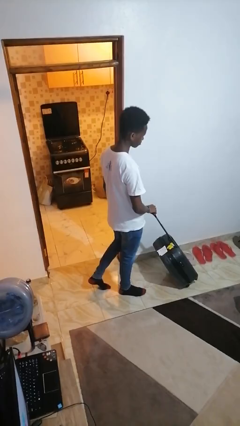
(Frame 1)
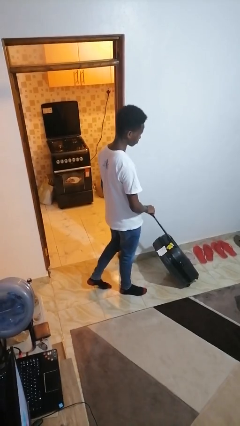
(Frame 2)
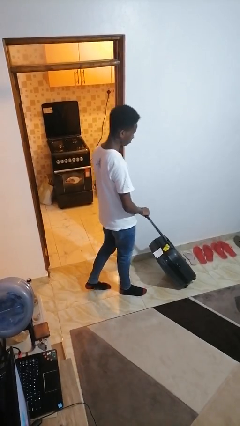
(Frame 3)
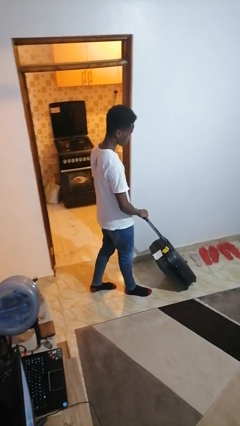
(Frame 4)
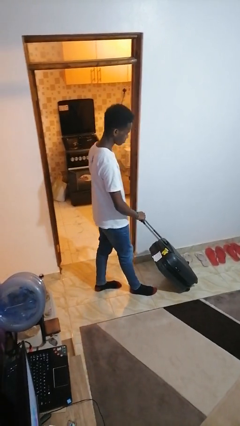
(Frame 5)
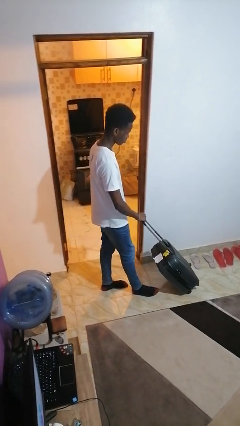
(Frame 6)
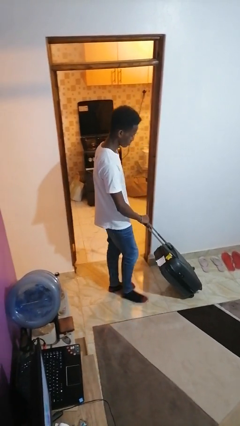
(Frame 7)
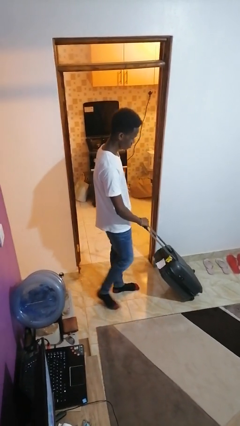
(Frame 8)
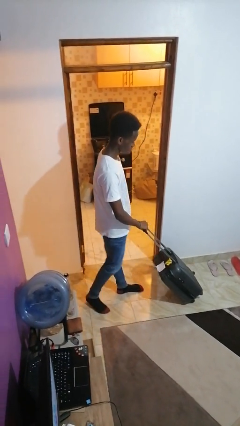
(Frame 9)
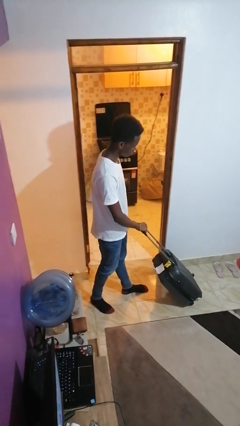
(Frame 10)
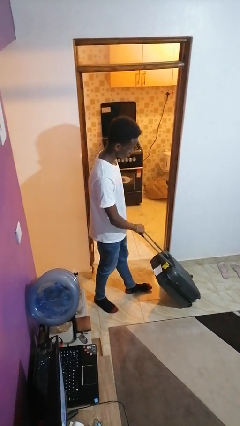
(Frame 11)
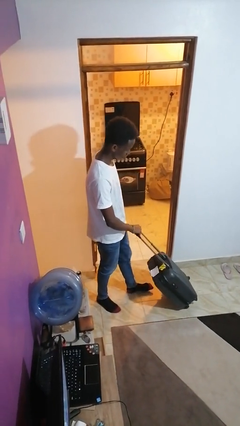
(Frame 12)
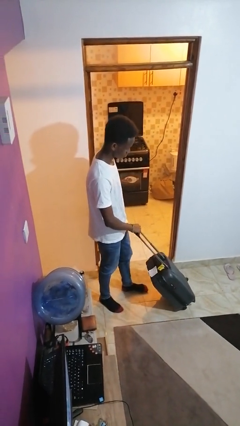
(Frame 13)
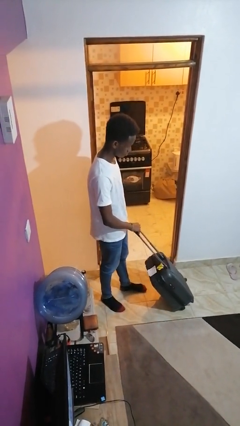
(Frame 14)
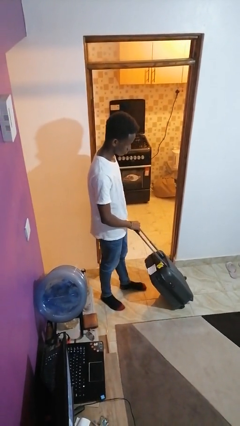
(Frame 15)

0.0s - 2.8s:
person pulls wheeled cart

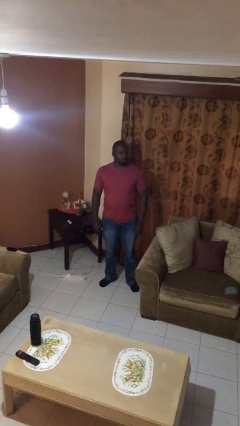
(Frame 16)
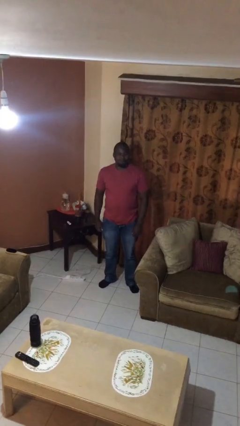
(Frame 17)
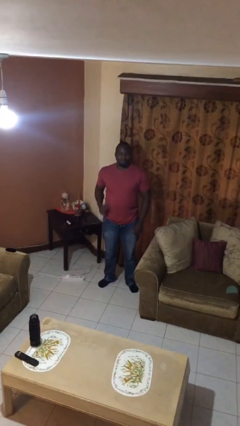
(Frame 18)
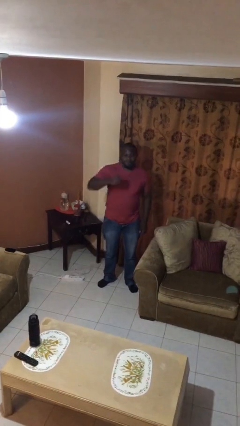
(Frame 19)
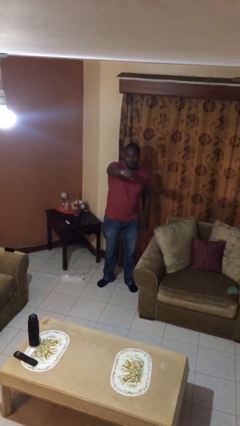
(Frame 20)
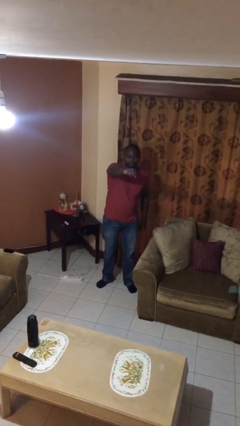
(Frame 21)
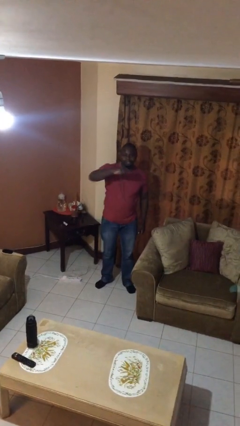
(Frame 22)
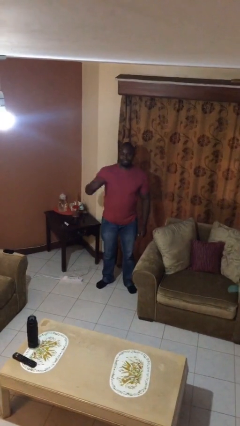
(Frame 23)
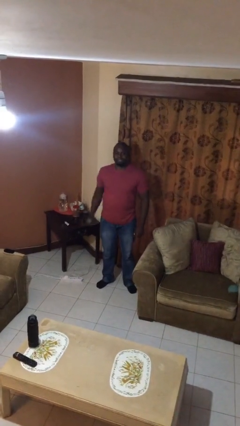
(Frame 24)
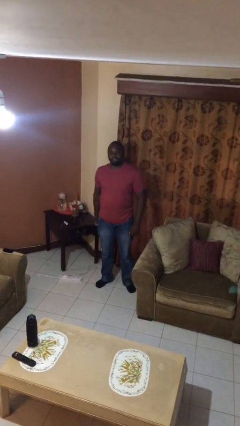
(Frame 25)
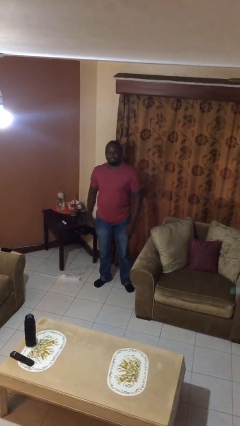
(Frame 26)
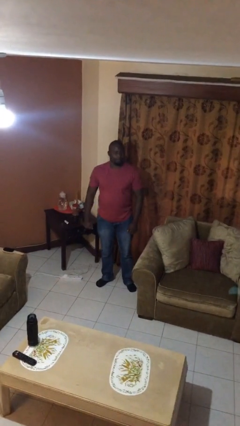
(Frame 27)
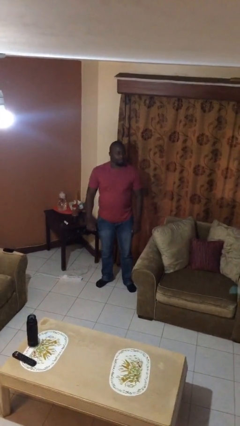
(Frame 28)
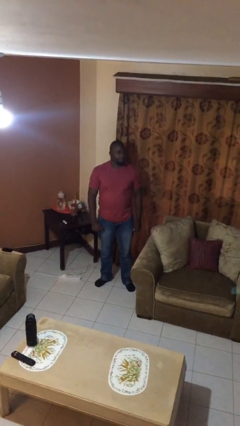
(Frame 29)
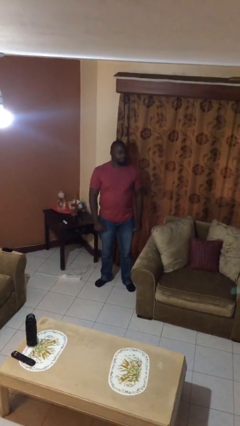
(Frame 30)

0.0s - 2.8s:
person punches

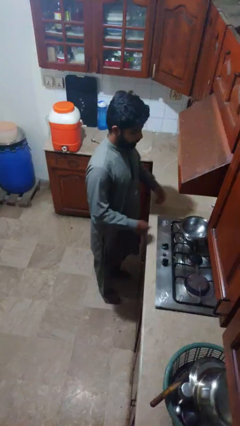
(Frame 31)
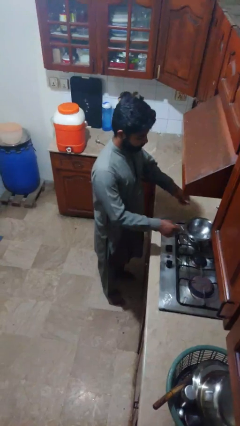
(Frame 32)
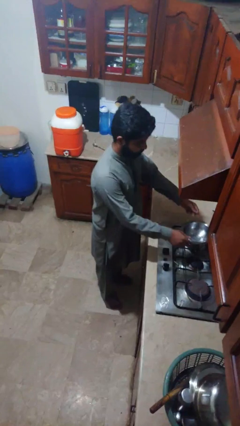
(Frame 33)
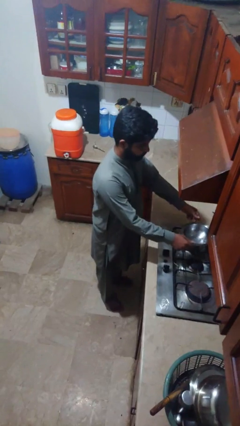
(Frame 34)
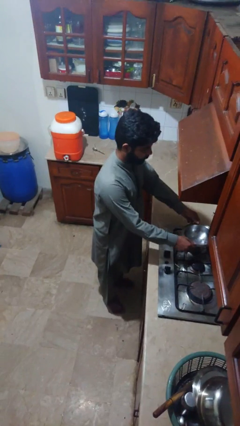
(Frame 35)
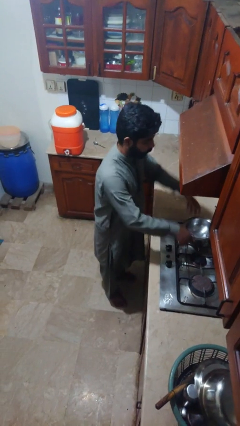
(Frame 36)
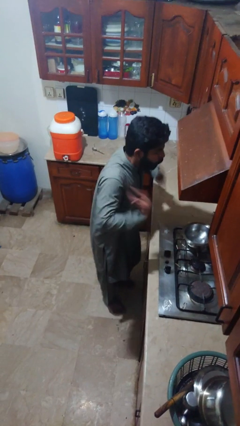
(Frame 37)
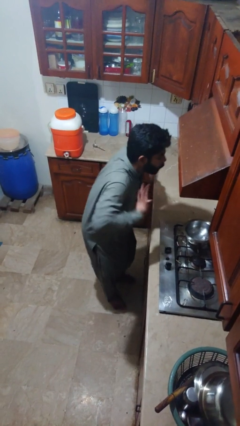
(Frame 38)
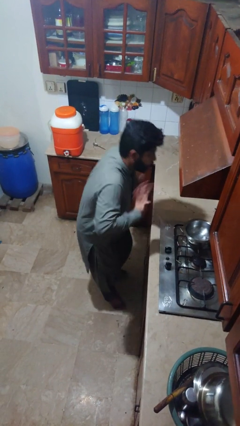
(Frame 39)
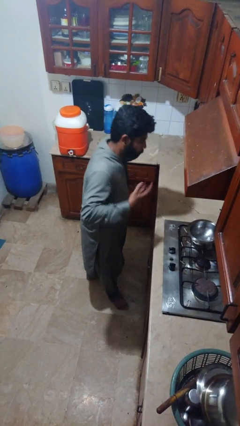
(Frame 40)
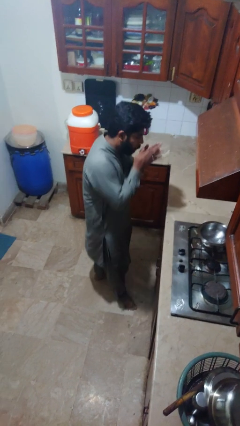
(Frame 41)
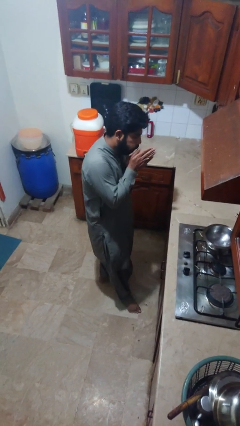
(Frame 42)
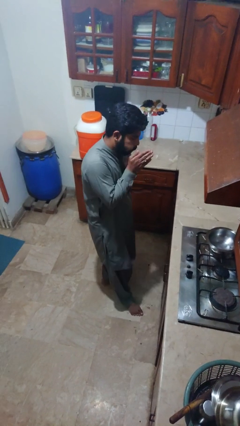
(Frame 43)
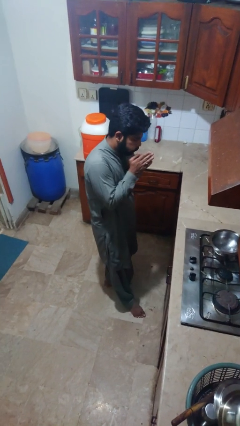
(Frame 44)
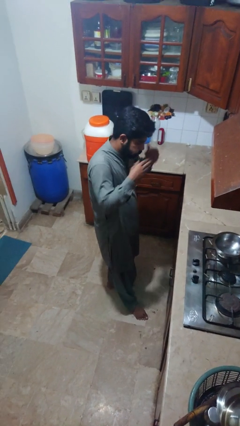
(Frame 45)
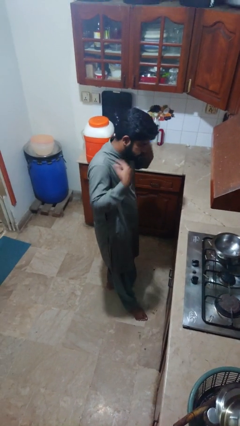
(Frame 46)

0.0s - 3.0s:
person burns hand

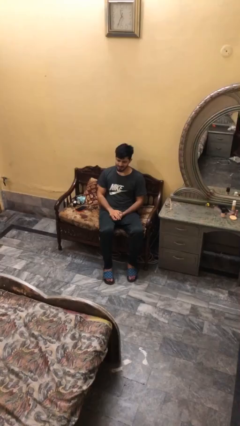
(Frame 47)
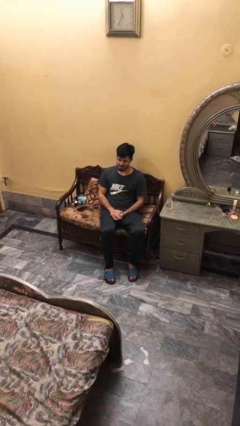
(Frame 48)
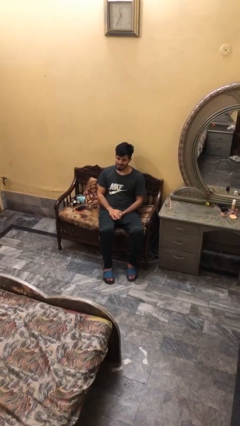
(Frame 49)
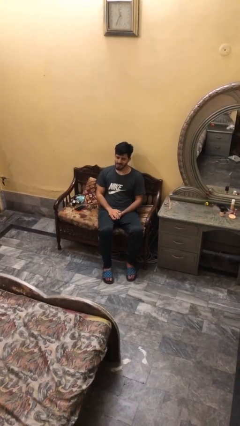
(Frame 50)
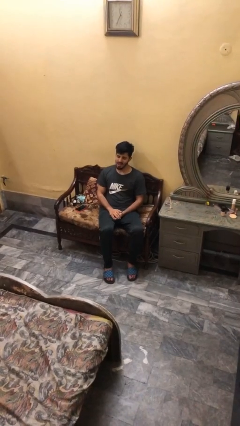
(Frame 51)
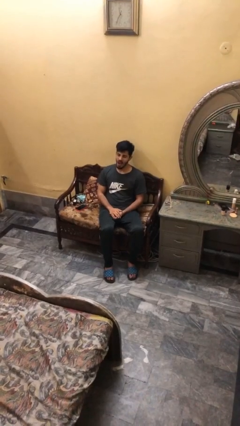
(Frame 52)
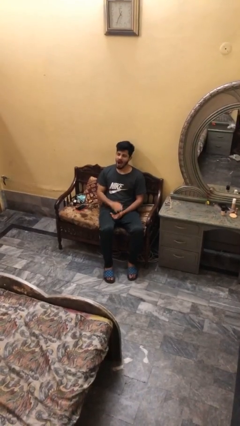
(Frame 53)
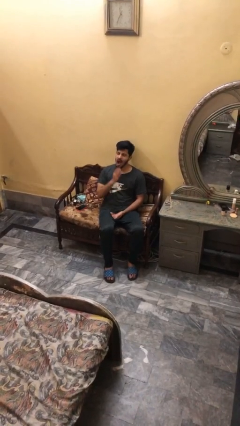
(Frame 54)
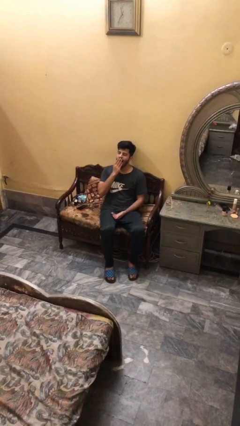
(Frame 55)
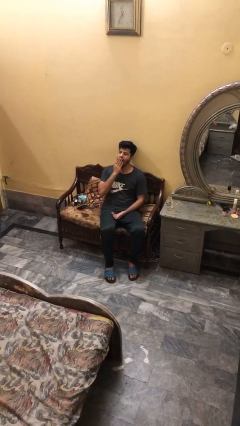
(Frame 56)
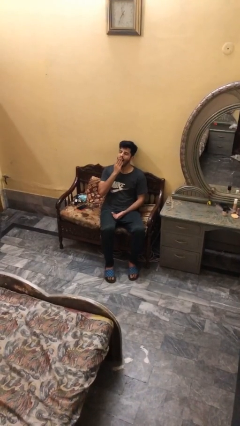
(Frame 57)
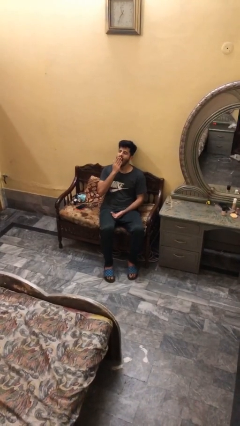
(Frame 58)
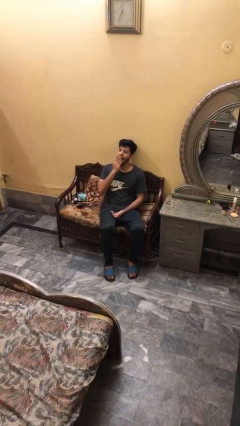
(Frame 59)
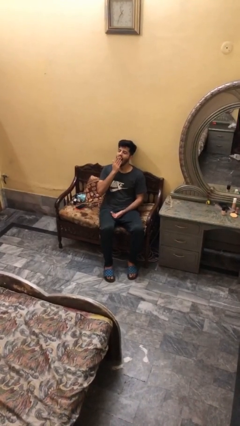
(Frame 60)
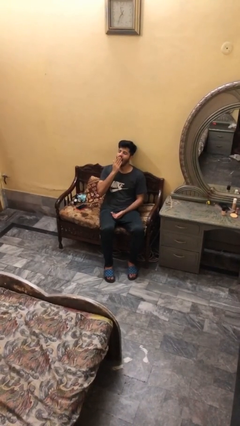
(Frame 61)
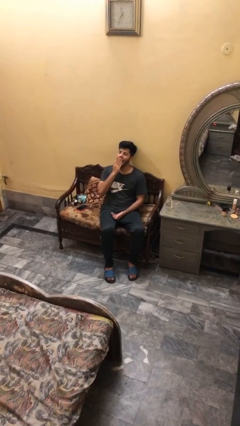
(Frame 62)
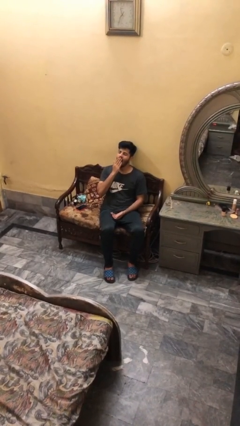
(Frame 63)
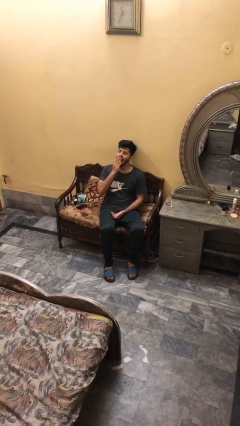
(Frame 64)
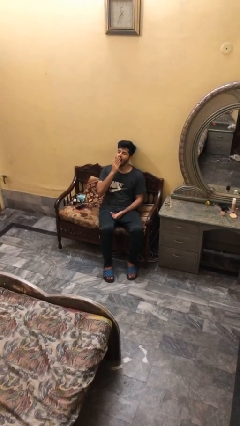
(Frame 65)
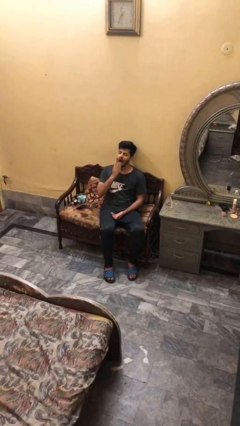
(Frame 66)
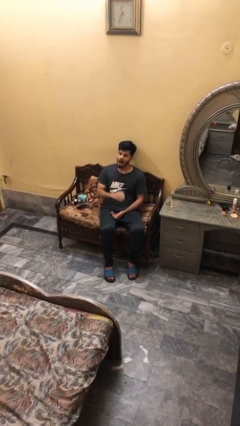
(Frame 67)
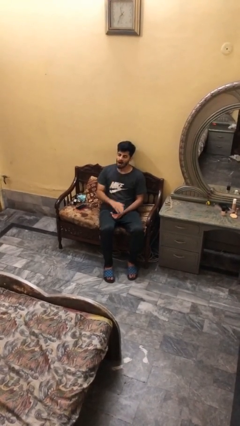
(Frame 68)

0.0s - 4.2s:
person yawns

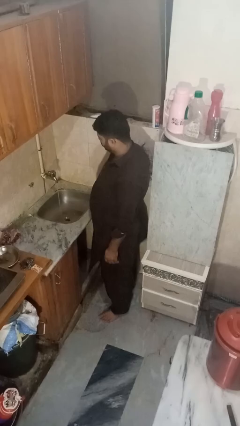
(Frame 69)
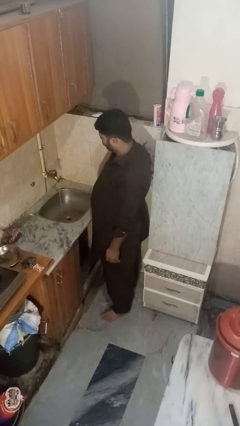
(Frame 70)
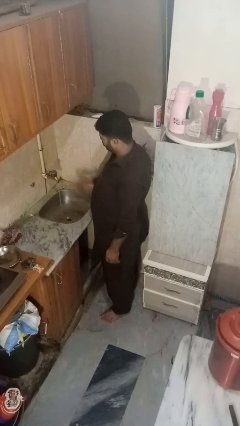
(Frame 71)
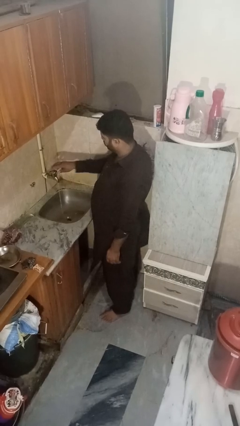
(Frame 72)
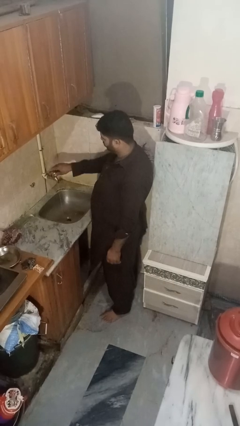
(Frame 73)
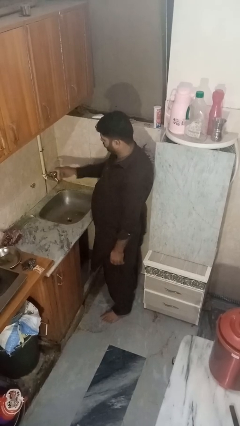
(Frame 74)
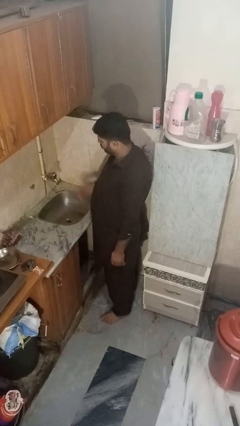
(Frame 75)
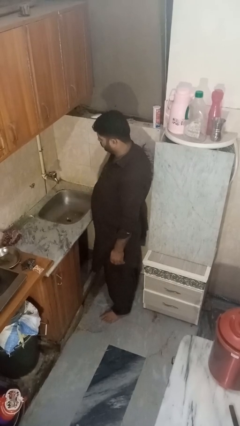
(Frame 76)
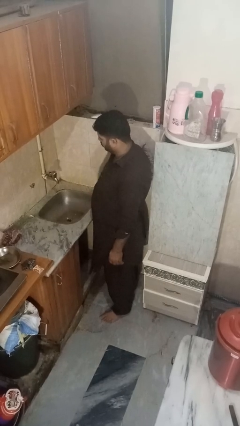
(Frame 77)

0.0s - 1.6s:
person turns off faucet

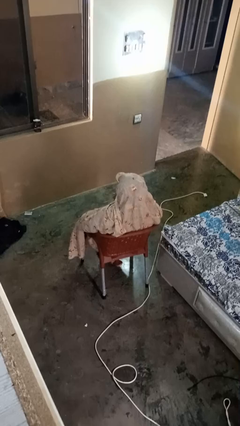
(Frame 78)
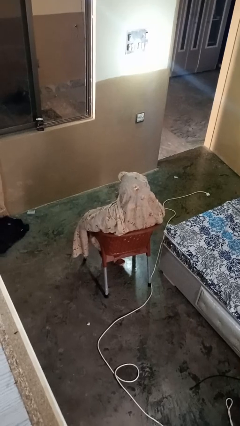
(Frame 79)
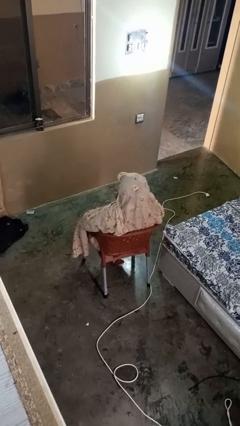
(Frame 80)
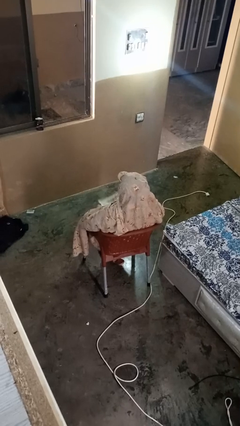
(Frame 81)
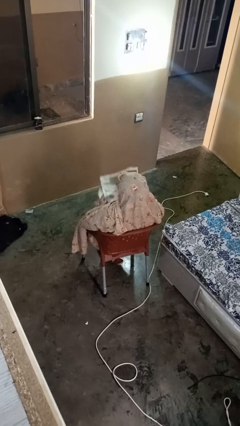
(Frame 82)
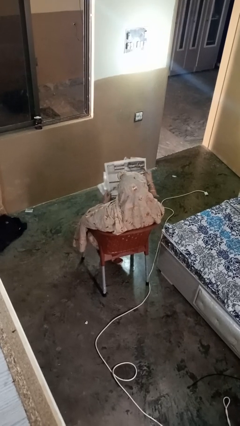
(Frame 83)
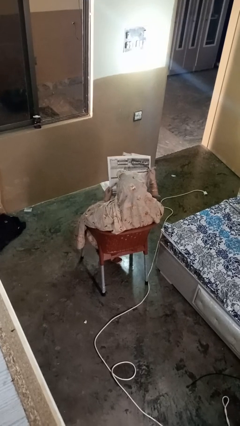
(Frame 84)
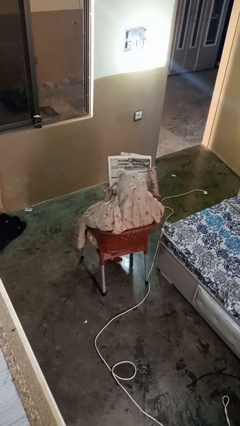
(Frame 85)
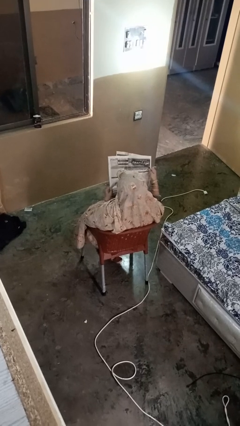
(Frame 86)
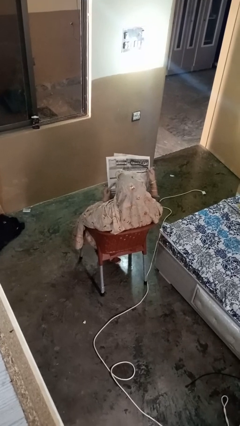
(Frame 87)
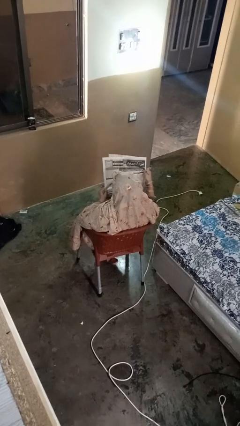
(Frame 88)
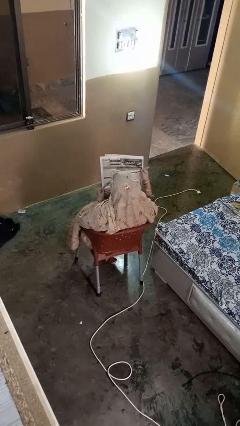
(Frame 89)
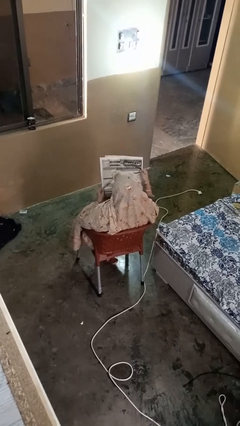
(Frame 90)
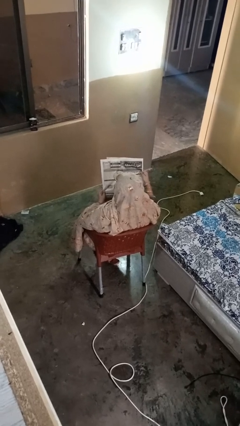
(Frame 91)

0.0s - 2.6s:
person reads newspaper

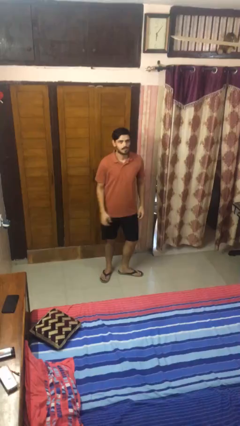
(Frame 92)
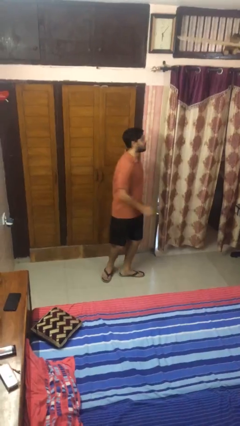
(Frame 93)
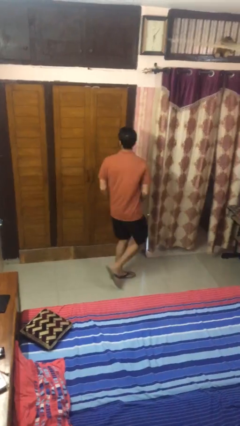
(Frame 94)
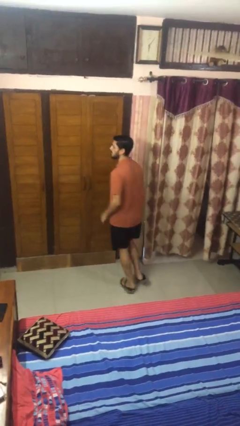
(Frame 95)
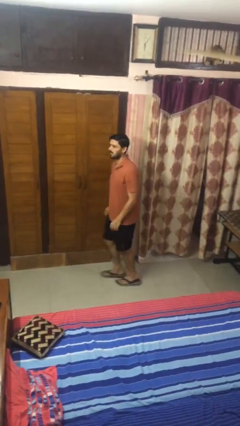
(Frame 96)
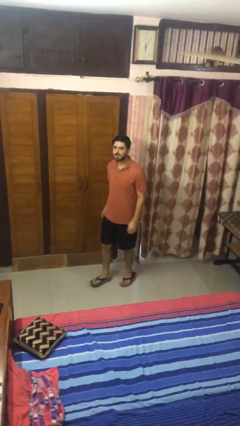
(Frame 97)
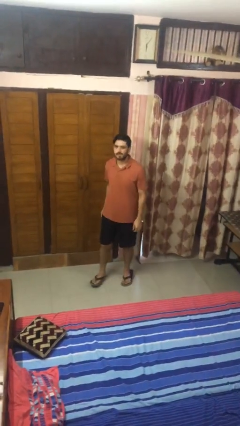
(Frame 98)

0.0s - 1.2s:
person twirls
